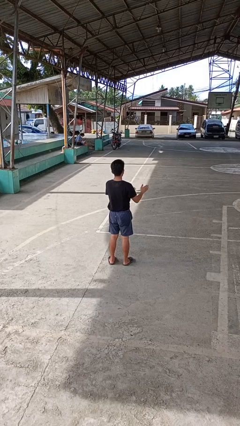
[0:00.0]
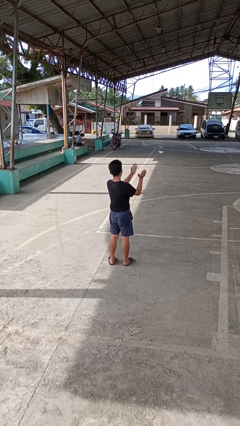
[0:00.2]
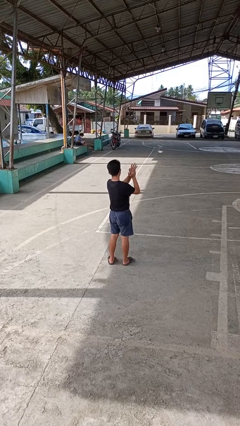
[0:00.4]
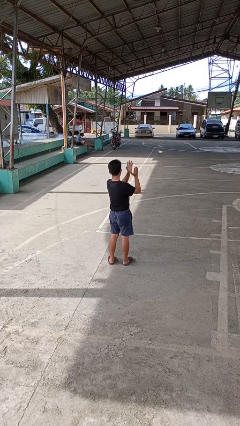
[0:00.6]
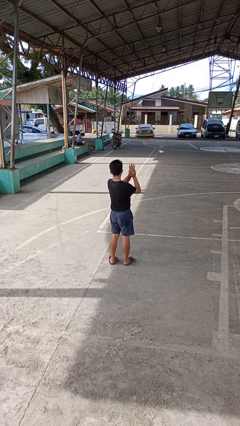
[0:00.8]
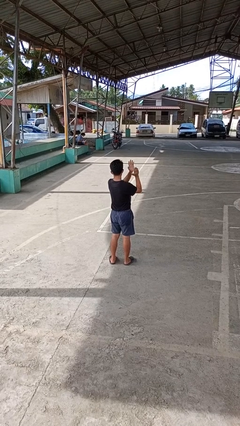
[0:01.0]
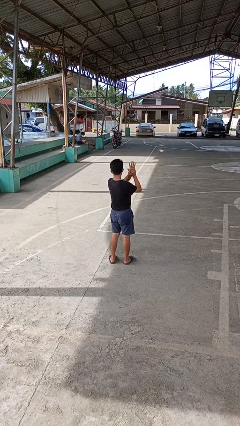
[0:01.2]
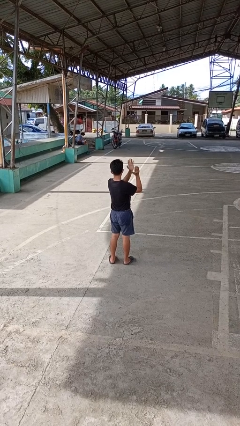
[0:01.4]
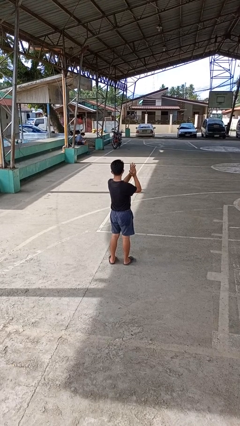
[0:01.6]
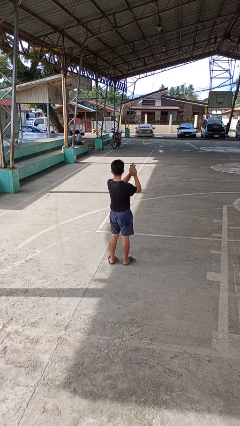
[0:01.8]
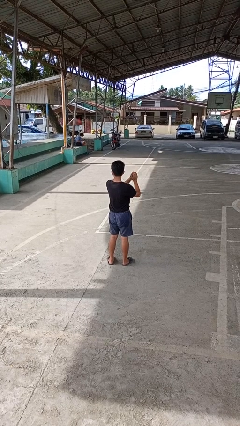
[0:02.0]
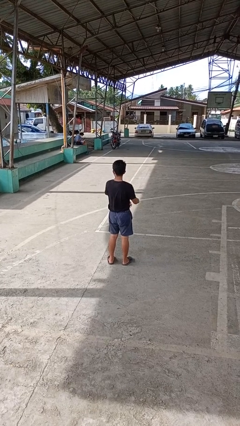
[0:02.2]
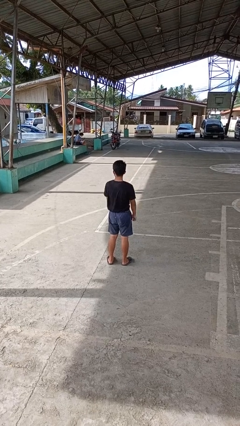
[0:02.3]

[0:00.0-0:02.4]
person claps hands

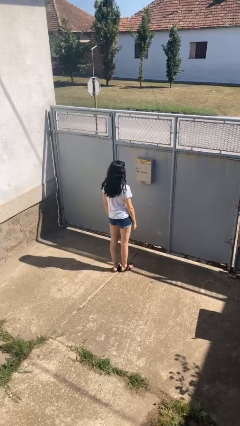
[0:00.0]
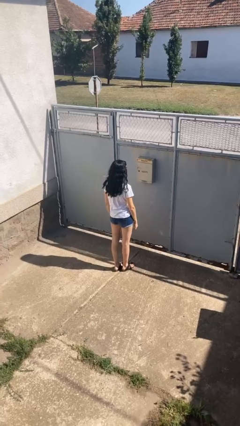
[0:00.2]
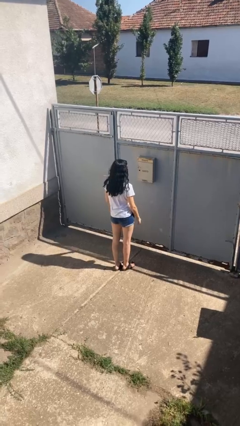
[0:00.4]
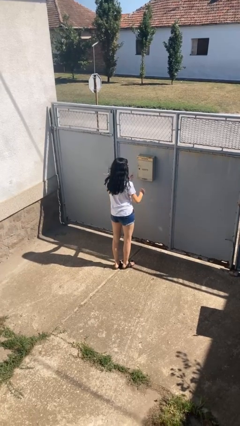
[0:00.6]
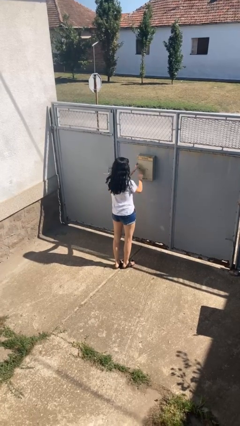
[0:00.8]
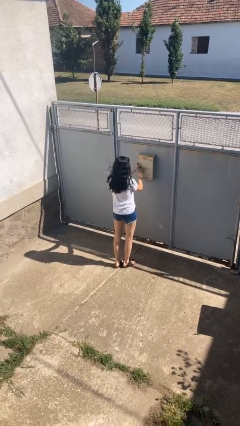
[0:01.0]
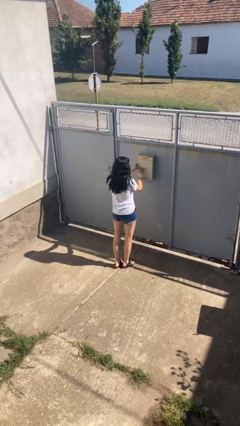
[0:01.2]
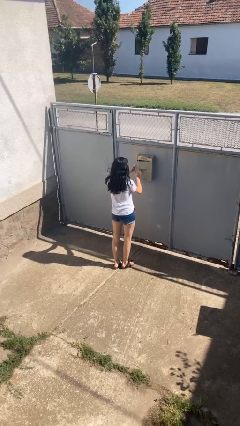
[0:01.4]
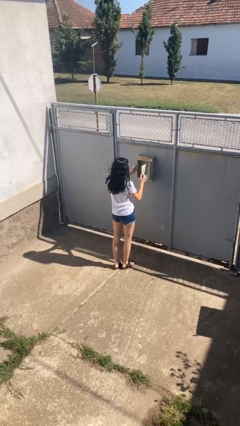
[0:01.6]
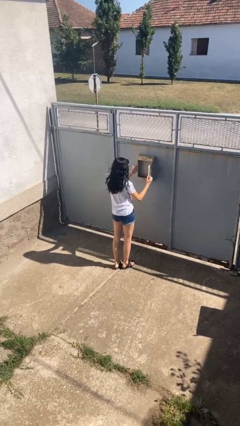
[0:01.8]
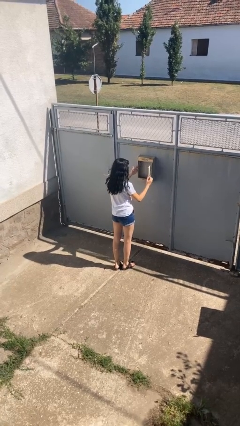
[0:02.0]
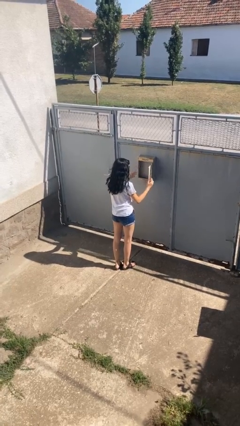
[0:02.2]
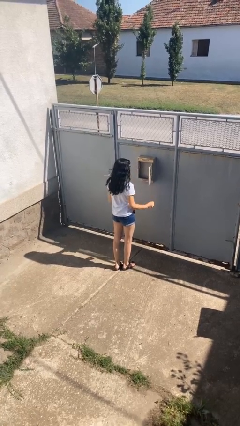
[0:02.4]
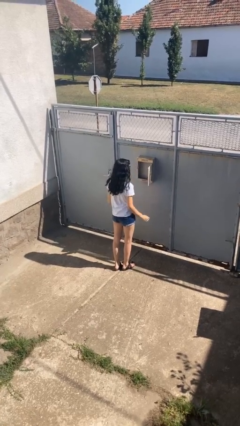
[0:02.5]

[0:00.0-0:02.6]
person opens mailbox

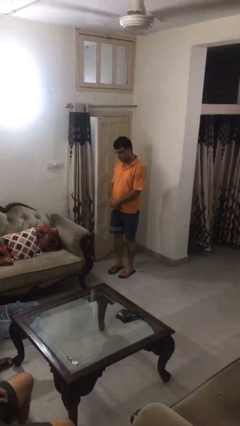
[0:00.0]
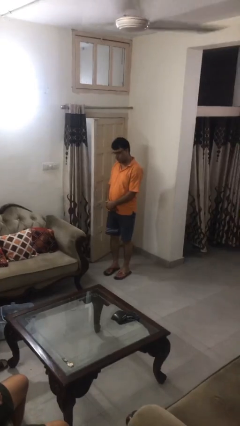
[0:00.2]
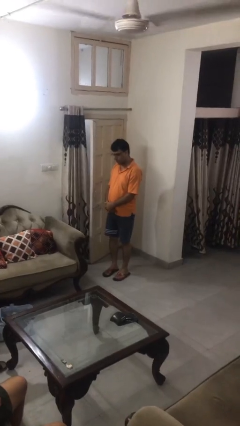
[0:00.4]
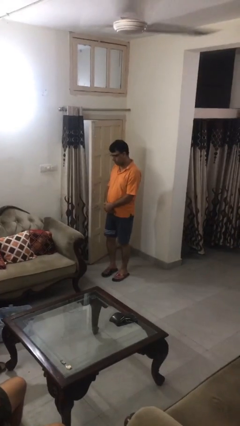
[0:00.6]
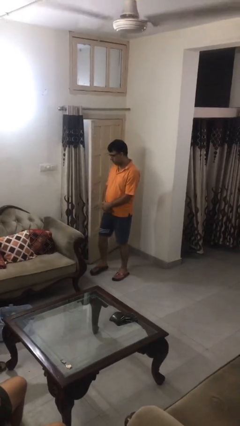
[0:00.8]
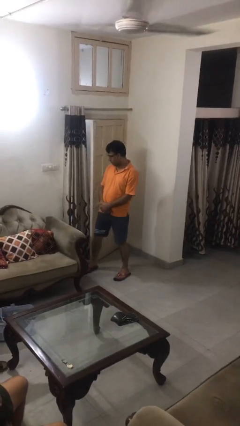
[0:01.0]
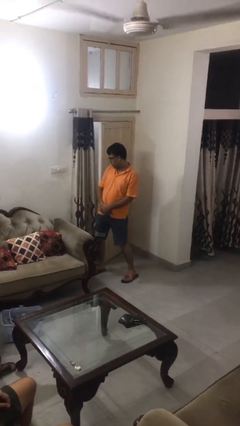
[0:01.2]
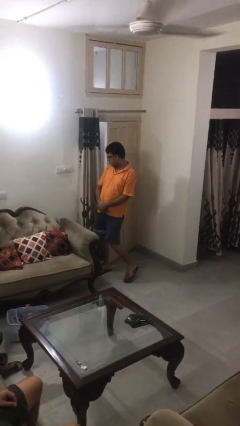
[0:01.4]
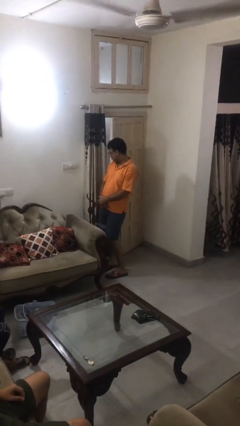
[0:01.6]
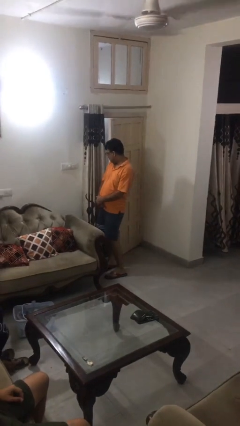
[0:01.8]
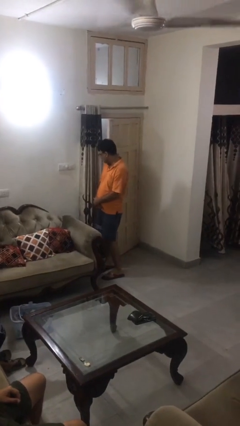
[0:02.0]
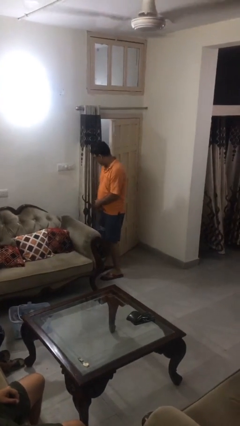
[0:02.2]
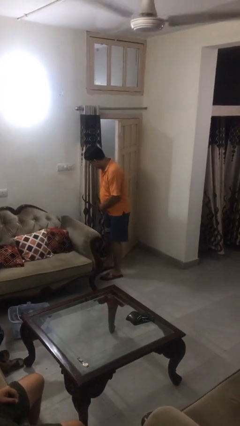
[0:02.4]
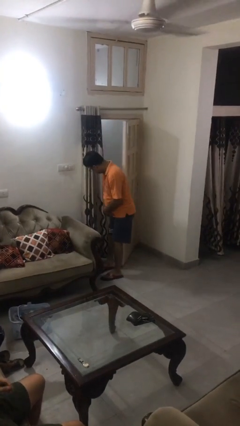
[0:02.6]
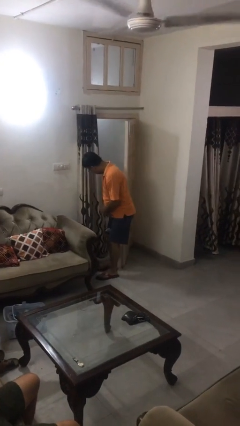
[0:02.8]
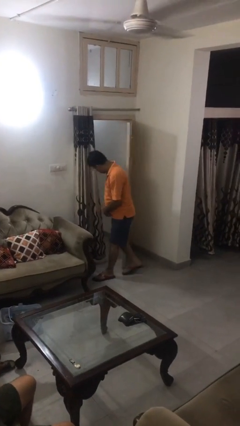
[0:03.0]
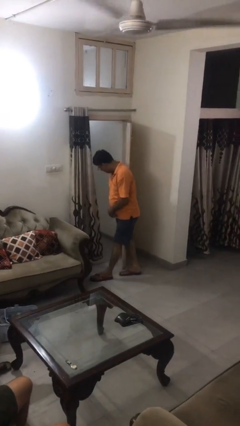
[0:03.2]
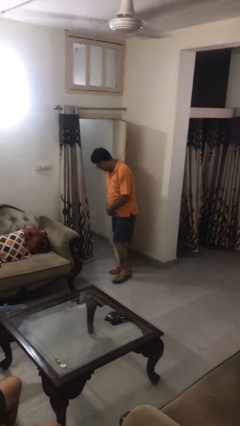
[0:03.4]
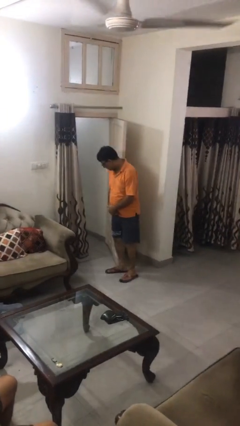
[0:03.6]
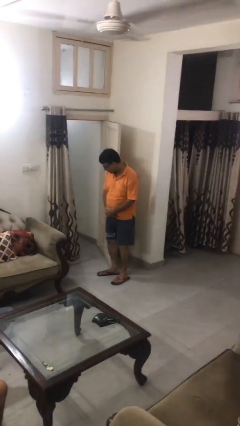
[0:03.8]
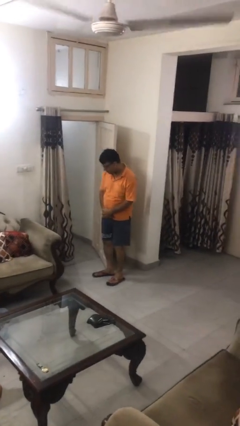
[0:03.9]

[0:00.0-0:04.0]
person opens facility door

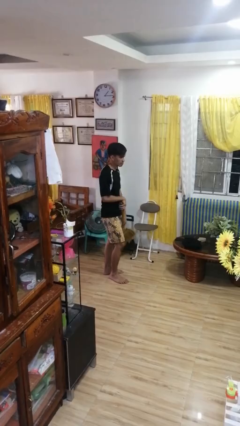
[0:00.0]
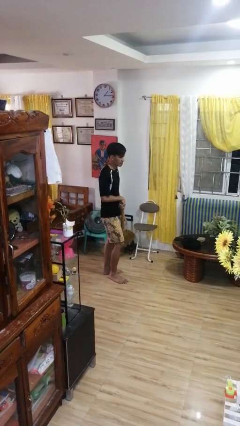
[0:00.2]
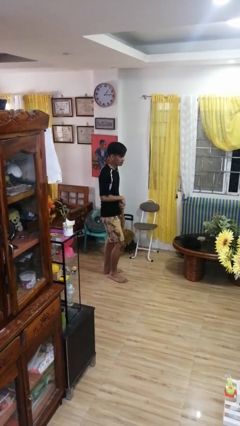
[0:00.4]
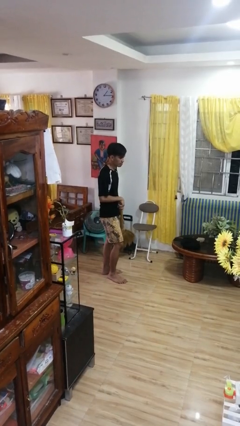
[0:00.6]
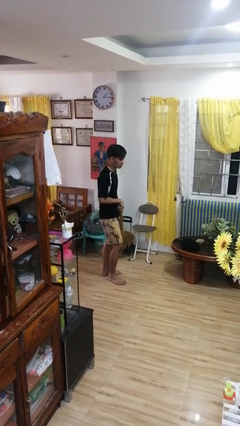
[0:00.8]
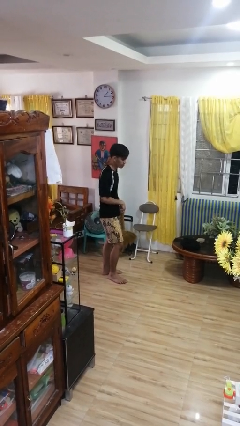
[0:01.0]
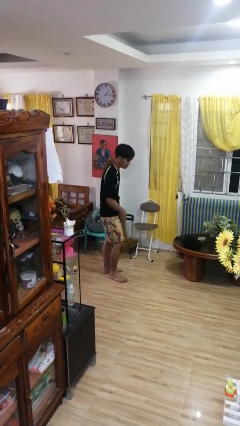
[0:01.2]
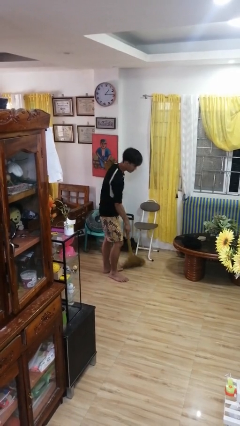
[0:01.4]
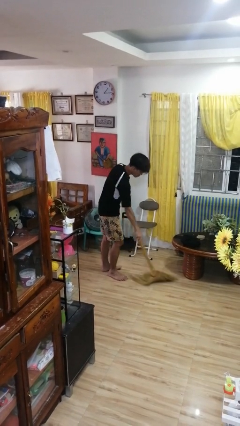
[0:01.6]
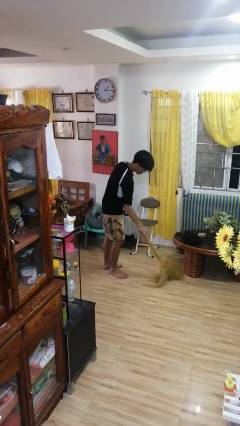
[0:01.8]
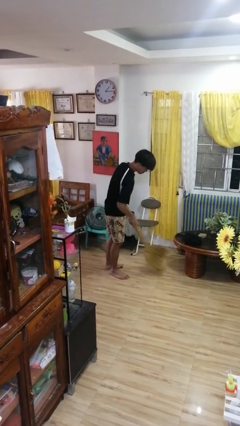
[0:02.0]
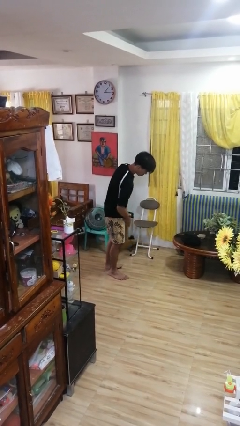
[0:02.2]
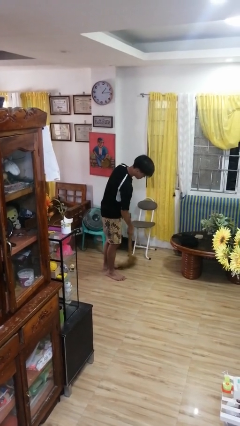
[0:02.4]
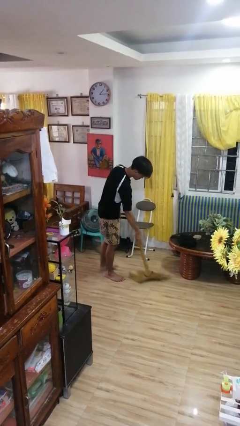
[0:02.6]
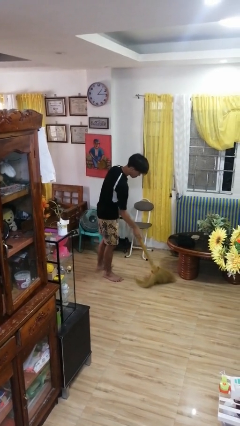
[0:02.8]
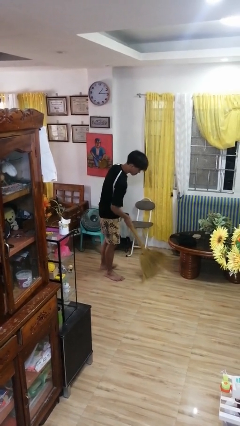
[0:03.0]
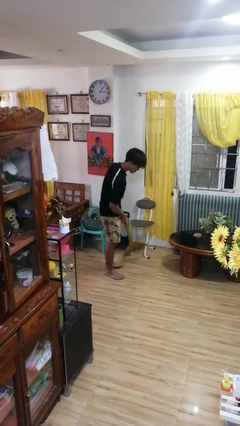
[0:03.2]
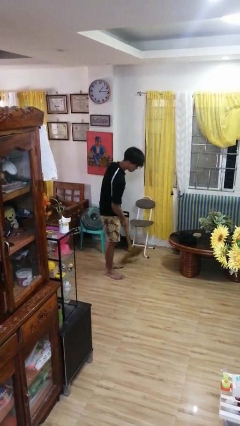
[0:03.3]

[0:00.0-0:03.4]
person sweeps floor

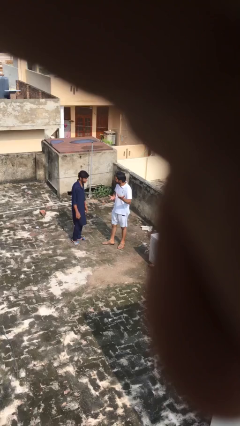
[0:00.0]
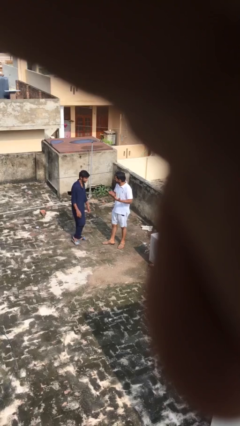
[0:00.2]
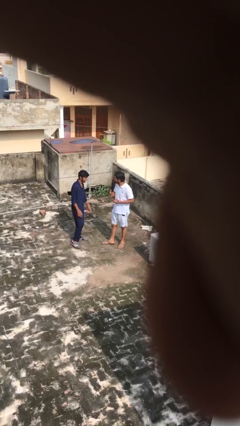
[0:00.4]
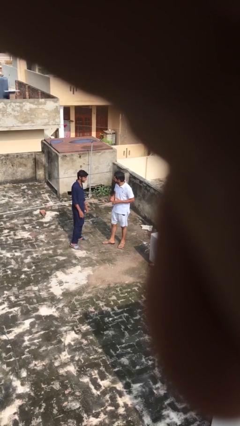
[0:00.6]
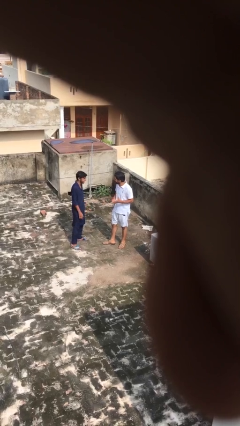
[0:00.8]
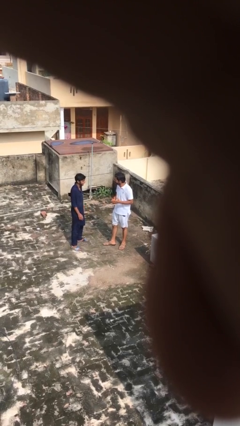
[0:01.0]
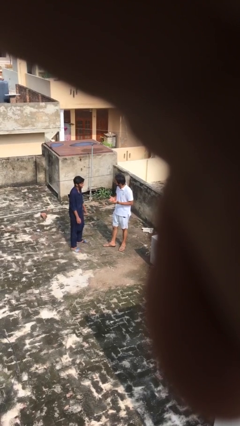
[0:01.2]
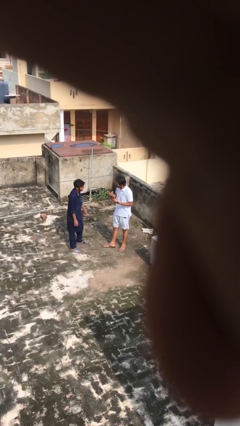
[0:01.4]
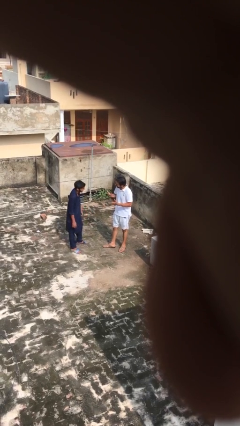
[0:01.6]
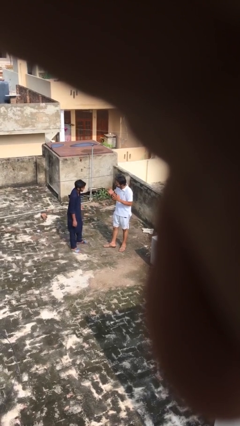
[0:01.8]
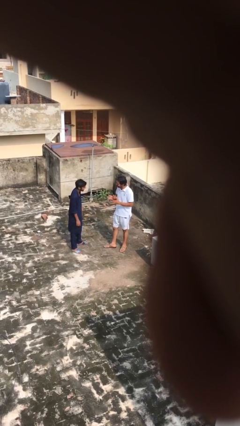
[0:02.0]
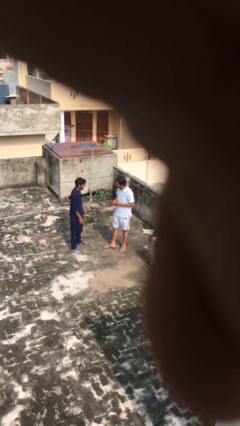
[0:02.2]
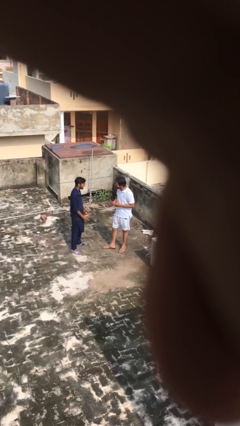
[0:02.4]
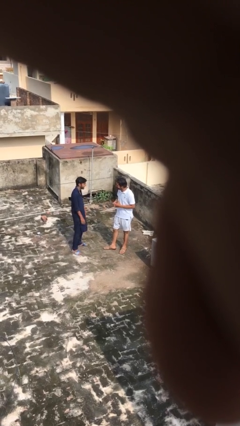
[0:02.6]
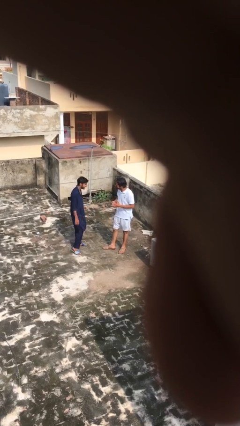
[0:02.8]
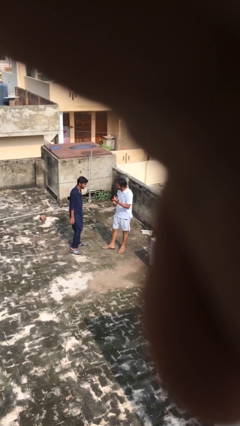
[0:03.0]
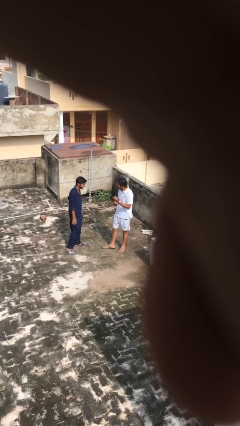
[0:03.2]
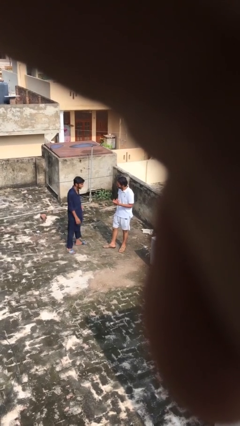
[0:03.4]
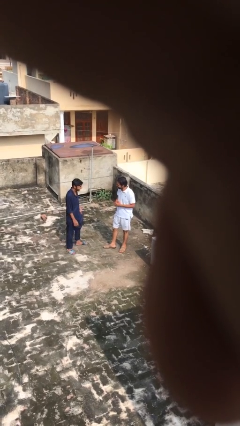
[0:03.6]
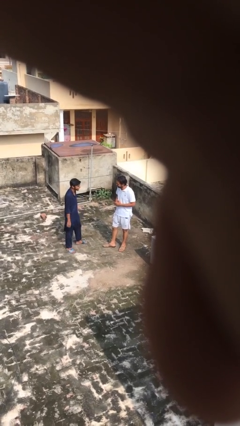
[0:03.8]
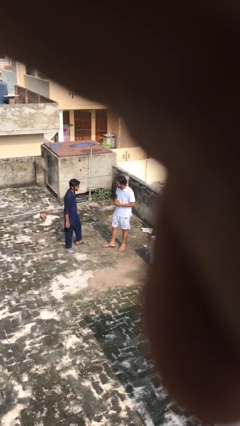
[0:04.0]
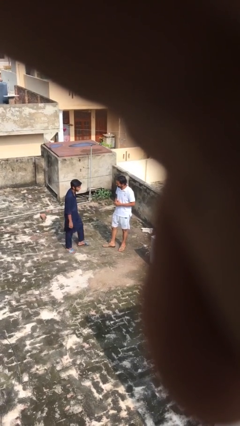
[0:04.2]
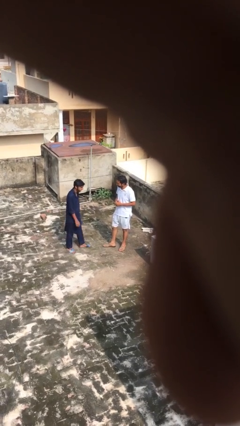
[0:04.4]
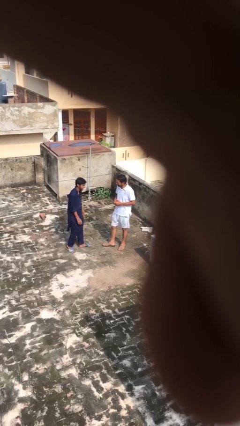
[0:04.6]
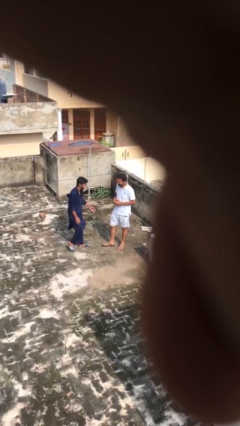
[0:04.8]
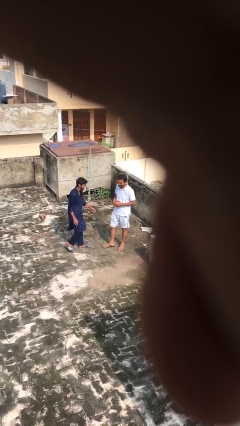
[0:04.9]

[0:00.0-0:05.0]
person talks to person

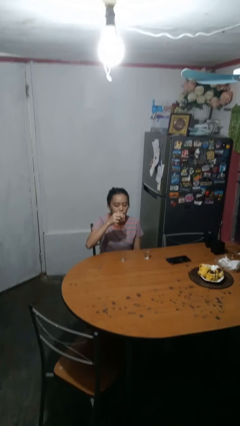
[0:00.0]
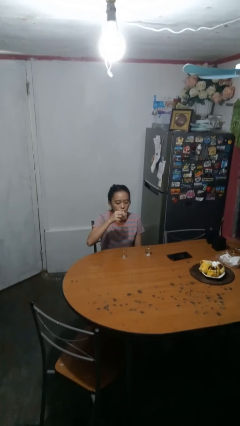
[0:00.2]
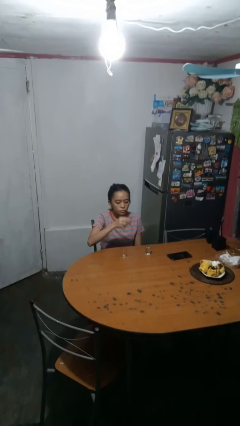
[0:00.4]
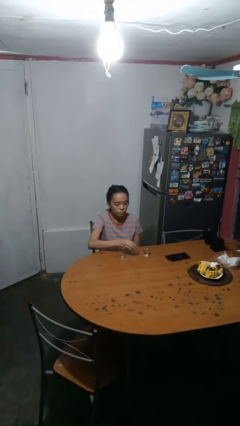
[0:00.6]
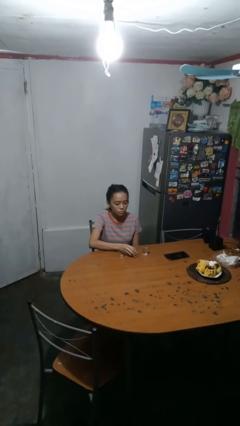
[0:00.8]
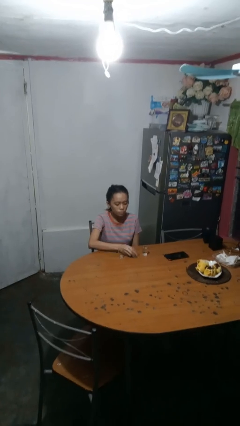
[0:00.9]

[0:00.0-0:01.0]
person puts down object on table
